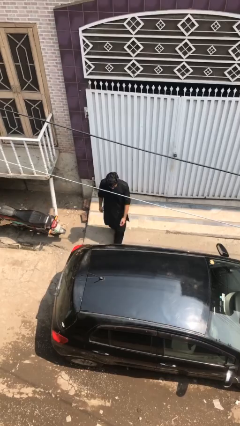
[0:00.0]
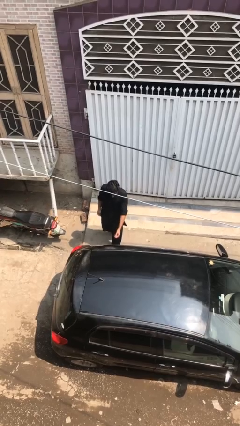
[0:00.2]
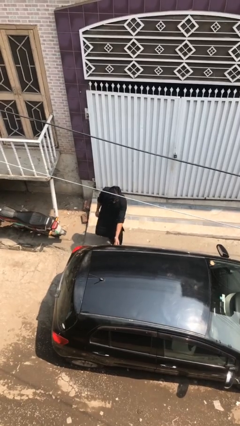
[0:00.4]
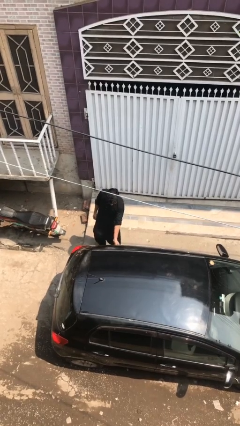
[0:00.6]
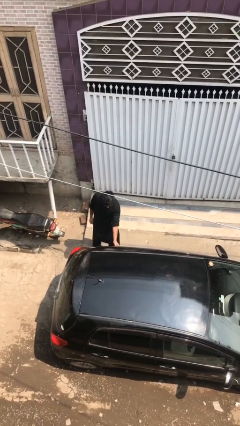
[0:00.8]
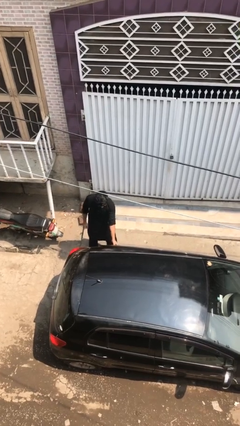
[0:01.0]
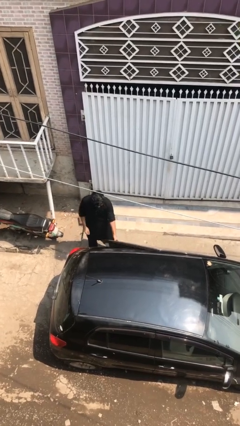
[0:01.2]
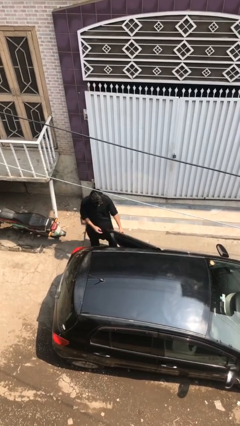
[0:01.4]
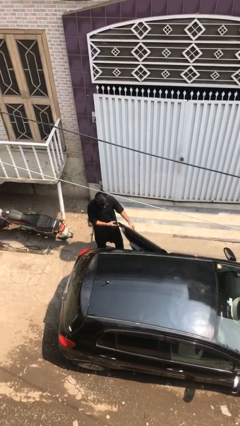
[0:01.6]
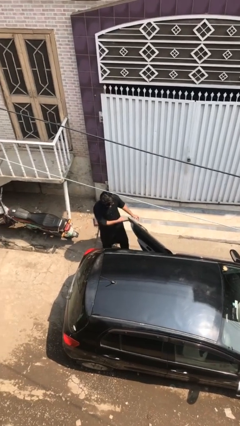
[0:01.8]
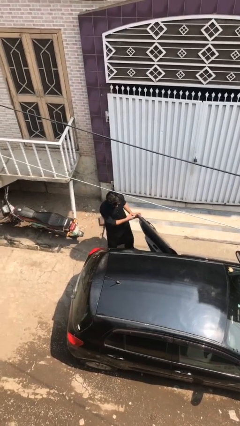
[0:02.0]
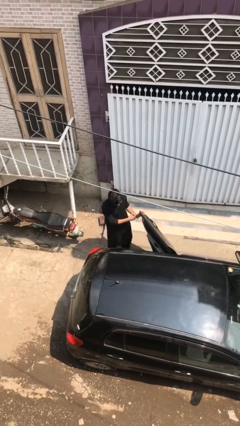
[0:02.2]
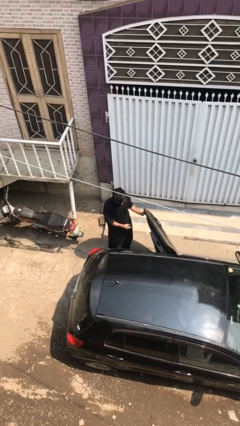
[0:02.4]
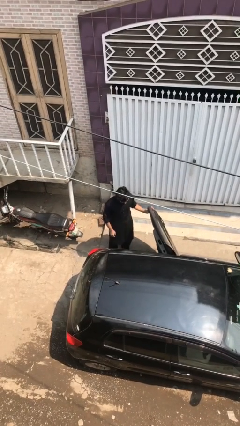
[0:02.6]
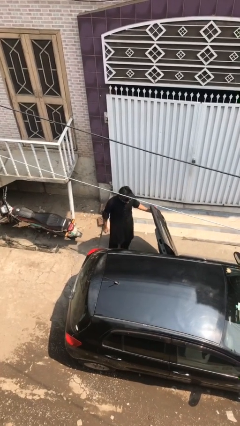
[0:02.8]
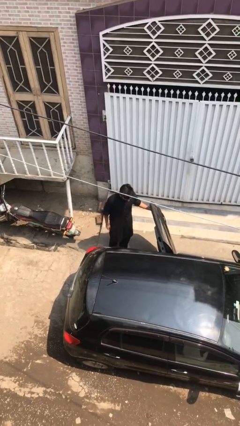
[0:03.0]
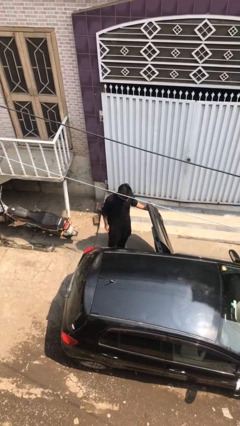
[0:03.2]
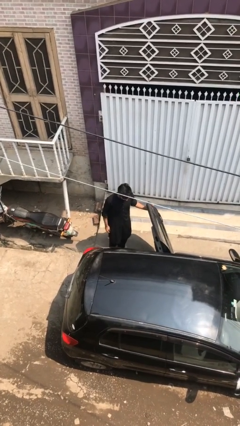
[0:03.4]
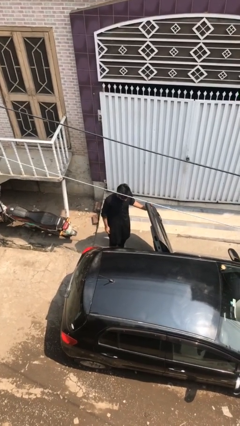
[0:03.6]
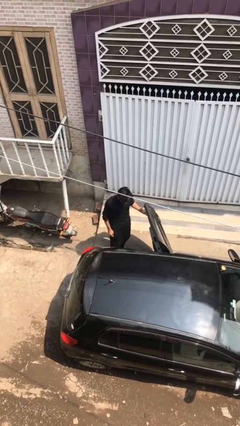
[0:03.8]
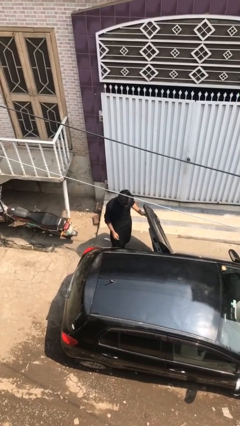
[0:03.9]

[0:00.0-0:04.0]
person opens car door

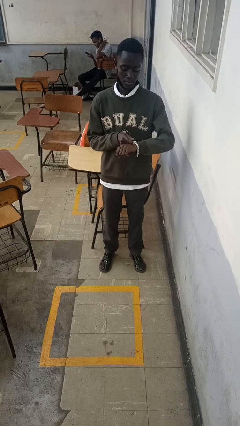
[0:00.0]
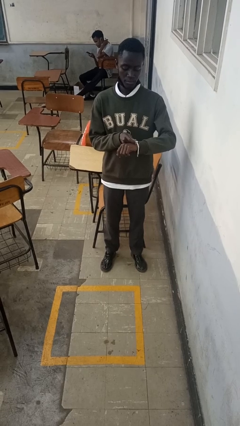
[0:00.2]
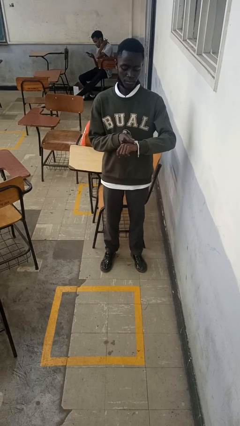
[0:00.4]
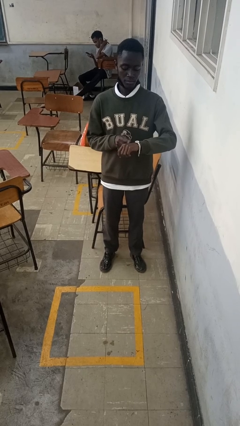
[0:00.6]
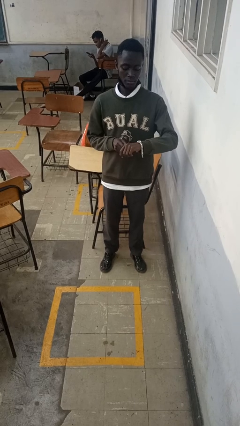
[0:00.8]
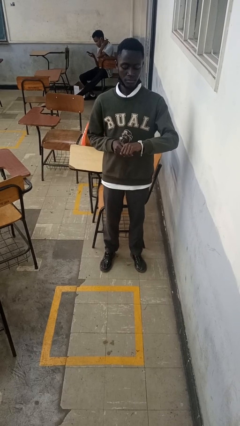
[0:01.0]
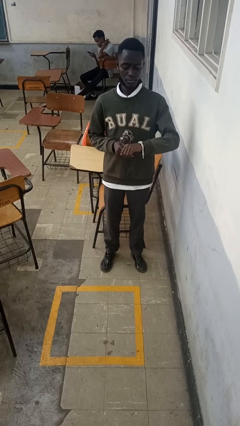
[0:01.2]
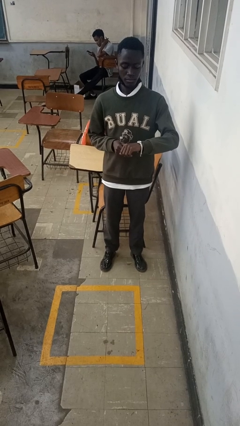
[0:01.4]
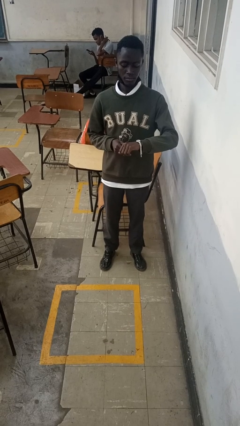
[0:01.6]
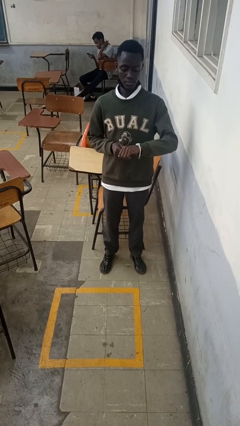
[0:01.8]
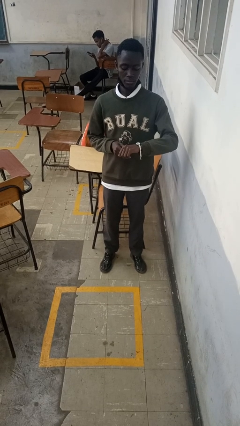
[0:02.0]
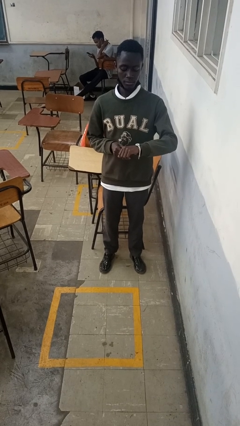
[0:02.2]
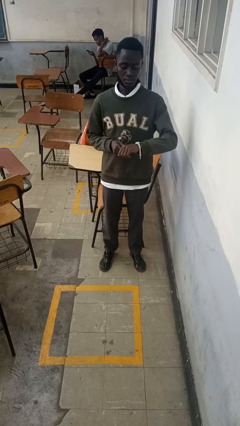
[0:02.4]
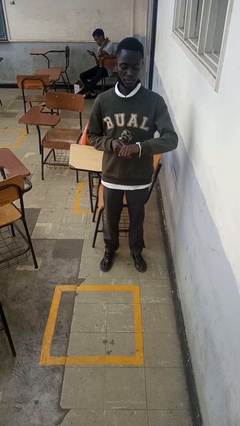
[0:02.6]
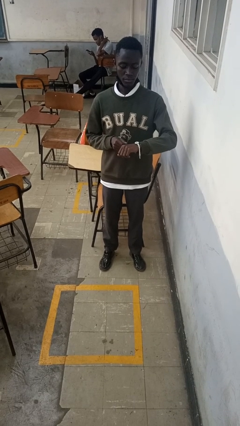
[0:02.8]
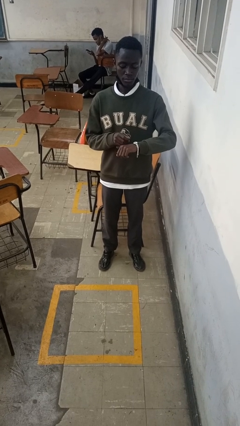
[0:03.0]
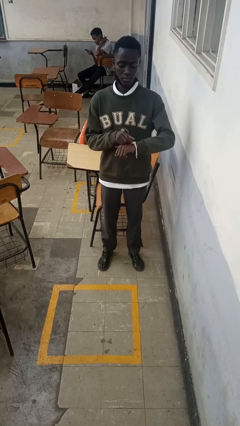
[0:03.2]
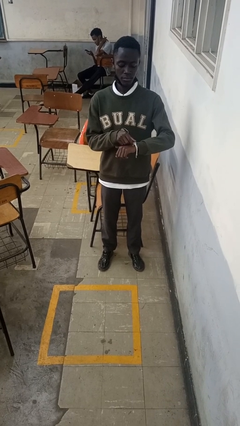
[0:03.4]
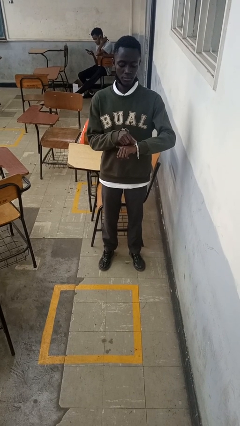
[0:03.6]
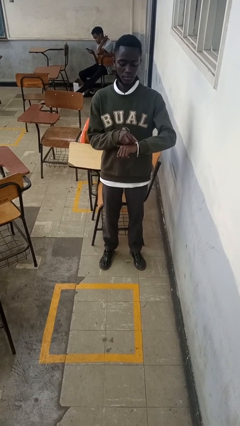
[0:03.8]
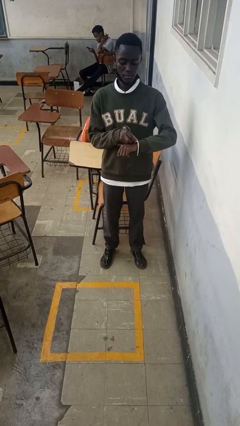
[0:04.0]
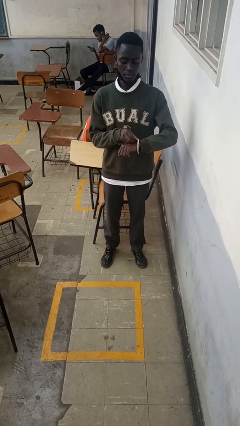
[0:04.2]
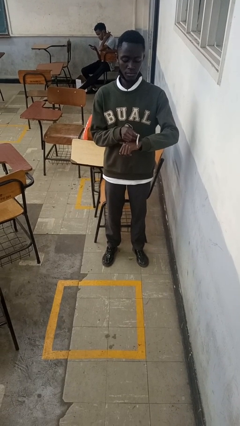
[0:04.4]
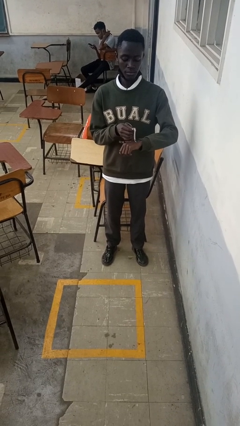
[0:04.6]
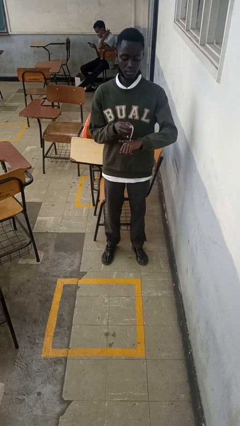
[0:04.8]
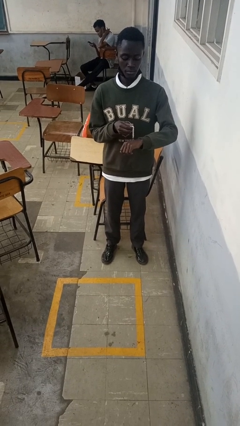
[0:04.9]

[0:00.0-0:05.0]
person puts on wristwatch

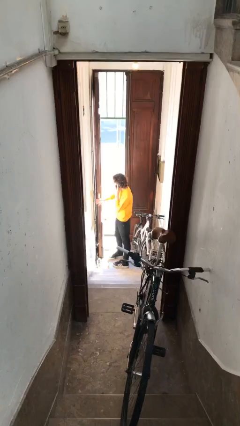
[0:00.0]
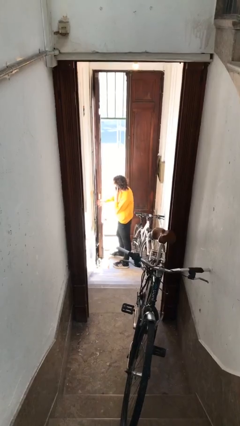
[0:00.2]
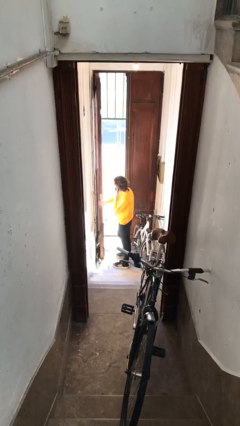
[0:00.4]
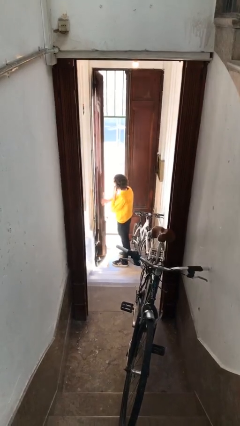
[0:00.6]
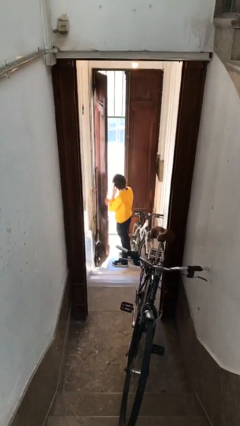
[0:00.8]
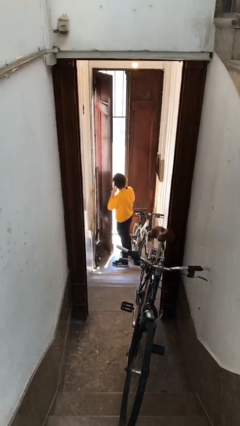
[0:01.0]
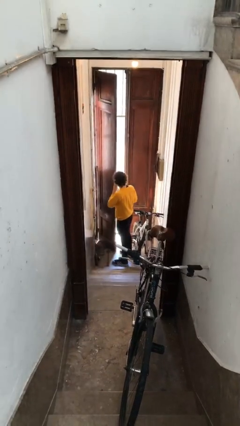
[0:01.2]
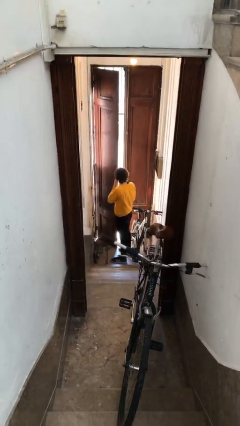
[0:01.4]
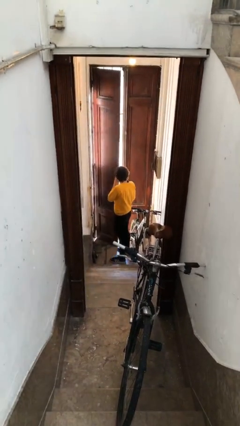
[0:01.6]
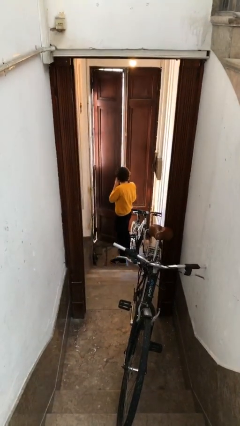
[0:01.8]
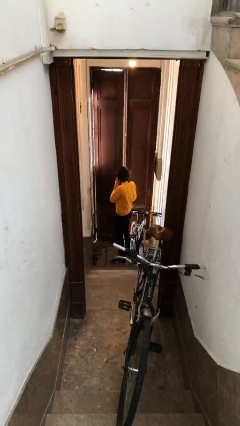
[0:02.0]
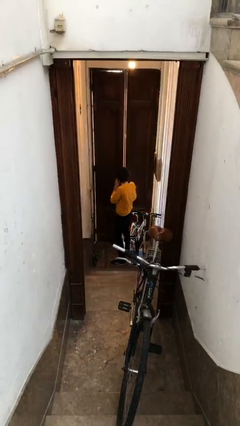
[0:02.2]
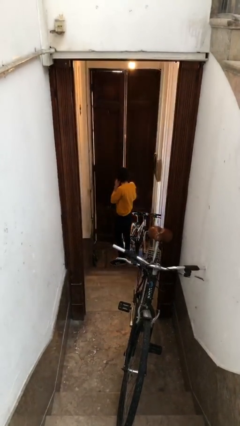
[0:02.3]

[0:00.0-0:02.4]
person closes facility door

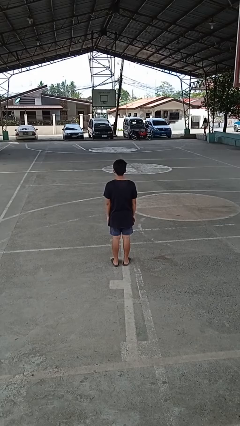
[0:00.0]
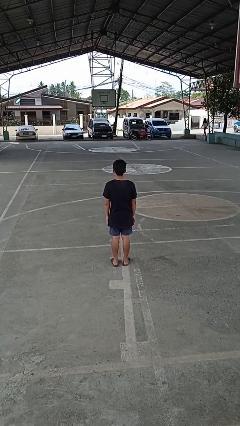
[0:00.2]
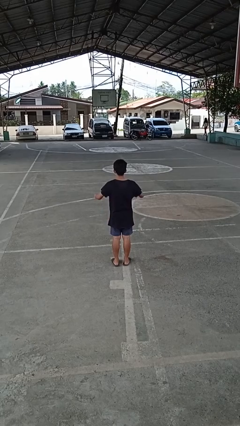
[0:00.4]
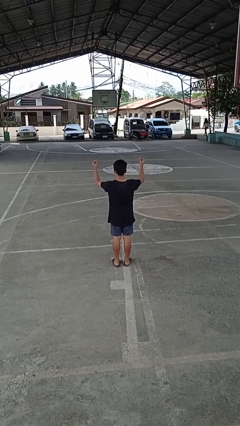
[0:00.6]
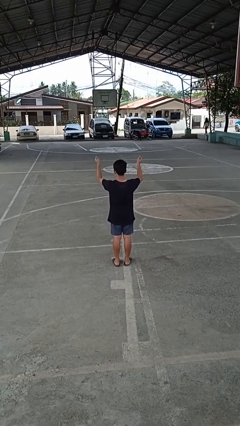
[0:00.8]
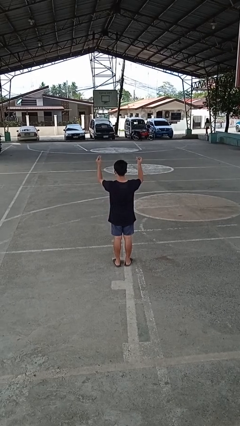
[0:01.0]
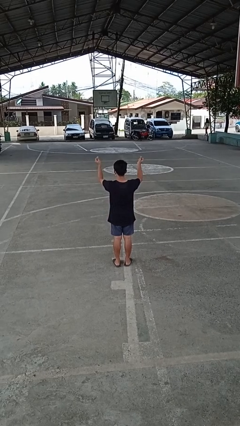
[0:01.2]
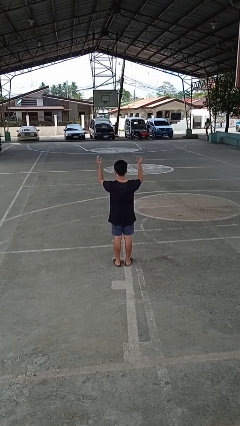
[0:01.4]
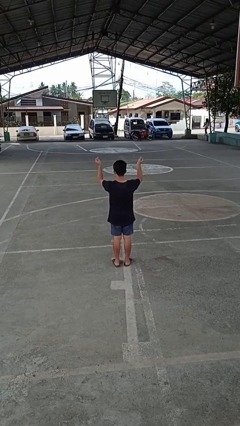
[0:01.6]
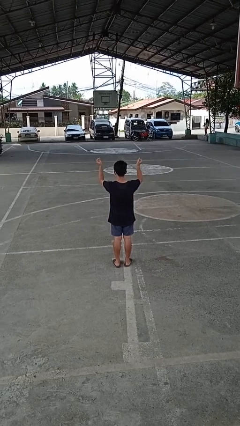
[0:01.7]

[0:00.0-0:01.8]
person snaps fingers

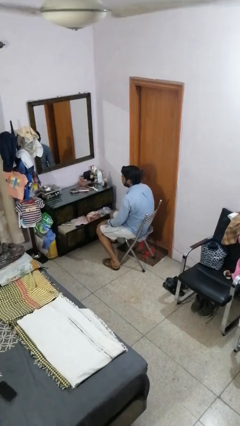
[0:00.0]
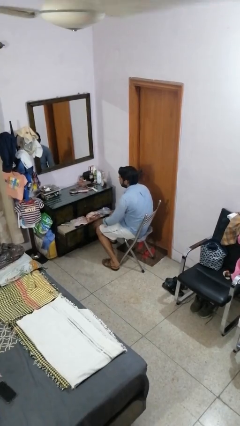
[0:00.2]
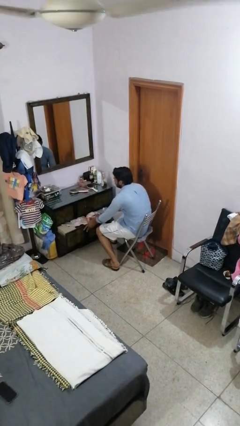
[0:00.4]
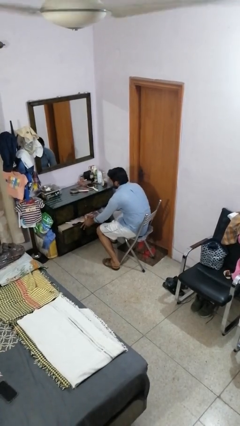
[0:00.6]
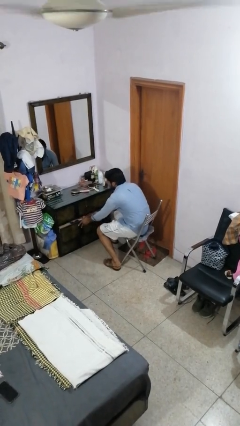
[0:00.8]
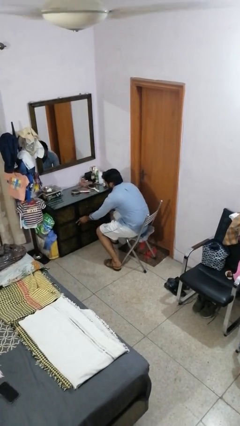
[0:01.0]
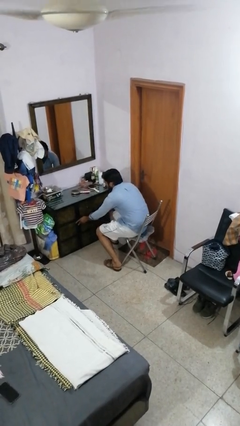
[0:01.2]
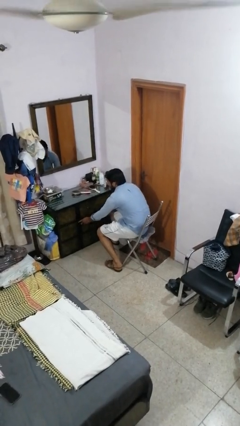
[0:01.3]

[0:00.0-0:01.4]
person closes dresser drawer

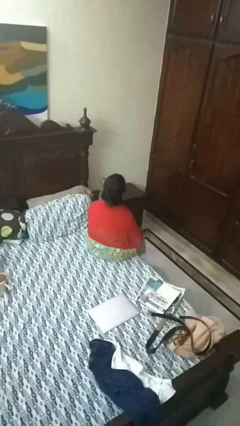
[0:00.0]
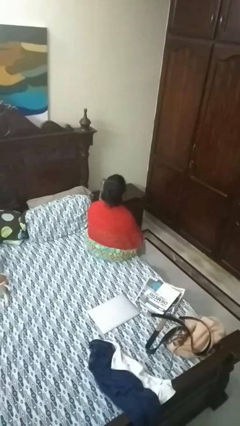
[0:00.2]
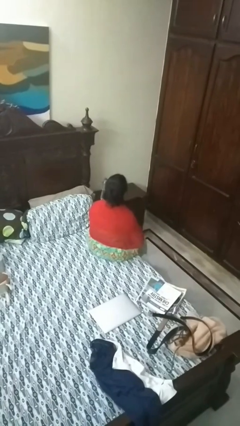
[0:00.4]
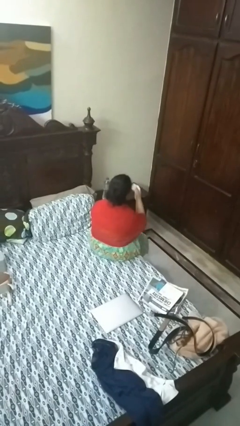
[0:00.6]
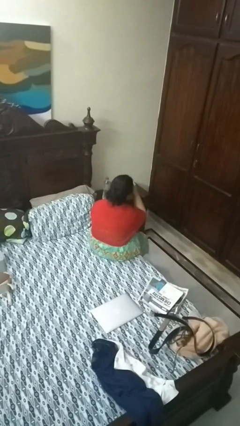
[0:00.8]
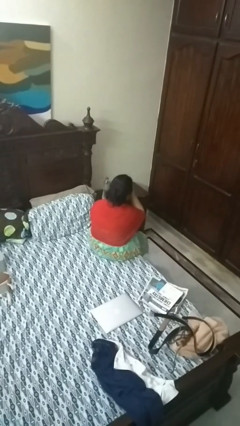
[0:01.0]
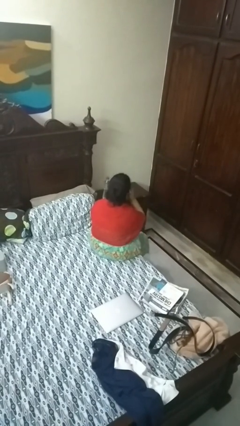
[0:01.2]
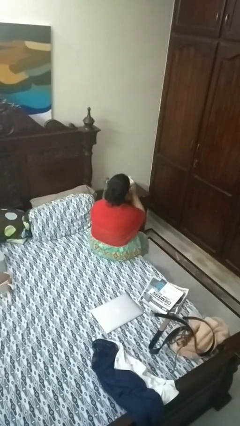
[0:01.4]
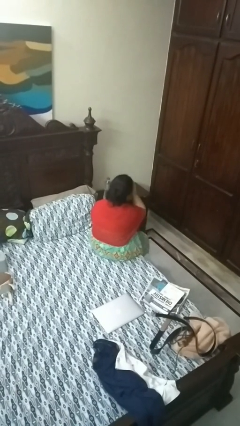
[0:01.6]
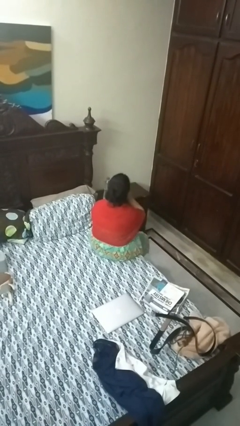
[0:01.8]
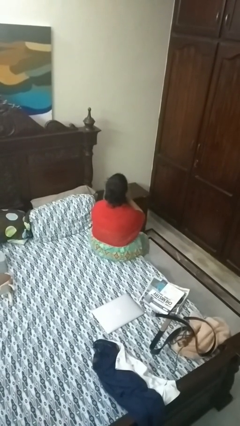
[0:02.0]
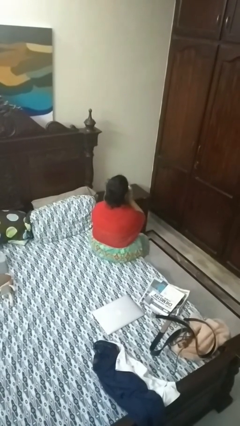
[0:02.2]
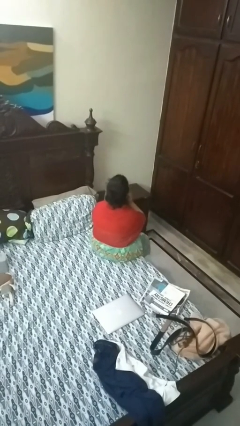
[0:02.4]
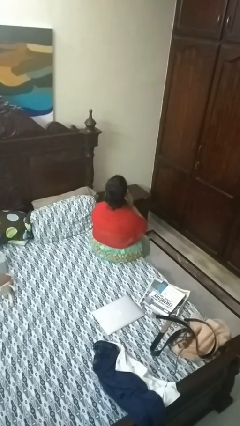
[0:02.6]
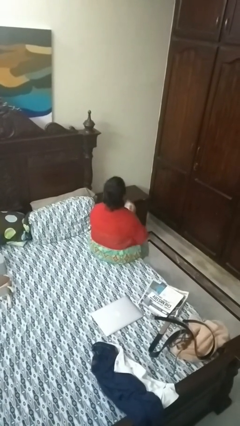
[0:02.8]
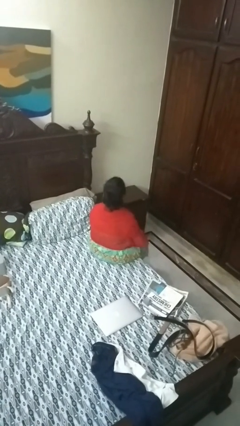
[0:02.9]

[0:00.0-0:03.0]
person wipes mouth with napkin
